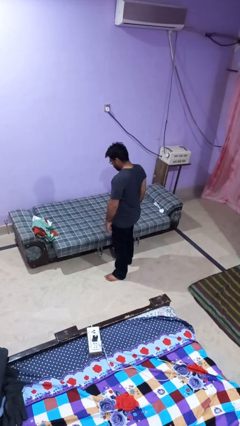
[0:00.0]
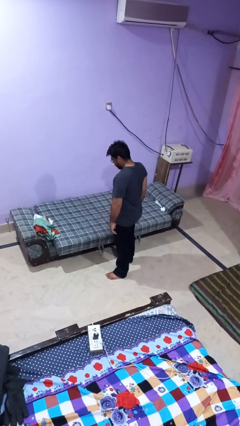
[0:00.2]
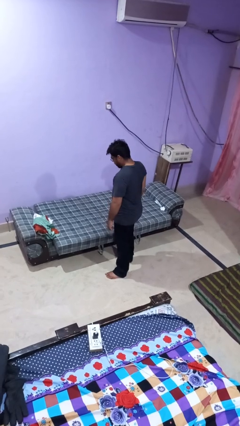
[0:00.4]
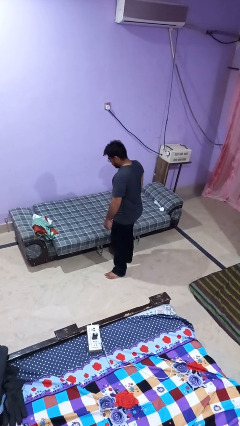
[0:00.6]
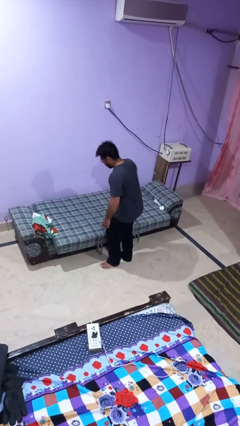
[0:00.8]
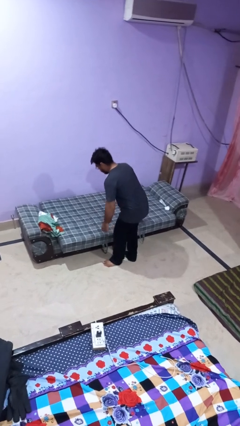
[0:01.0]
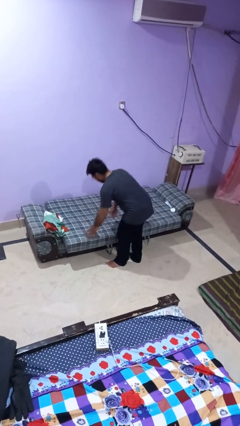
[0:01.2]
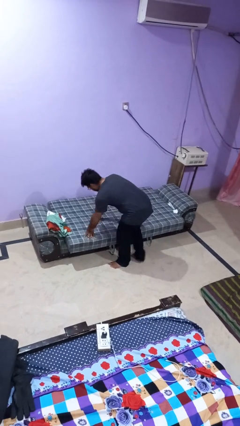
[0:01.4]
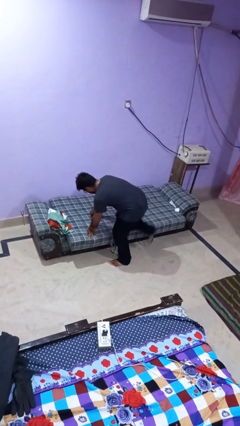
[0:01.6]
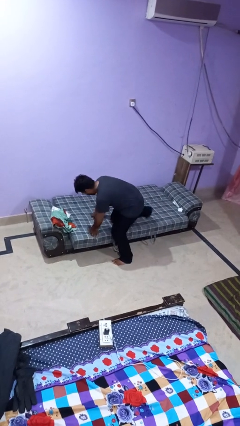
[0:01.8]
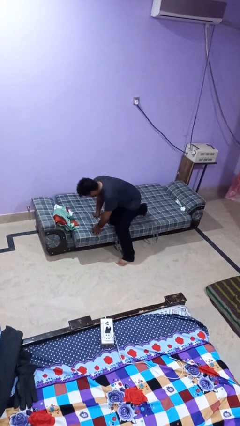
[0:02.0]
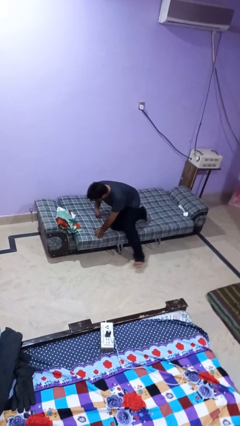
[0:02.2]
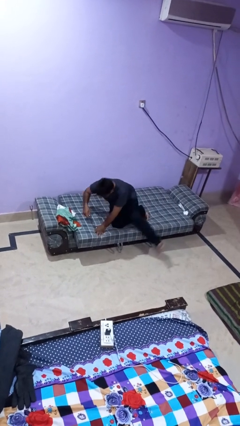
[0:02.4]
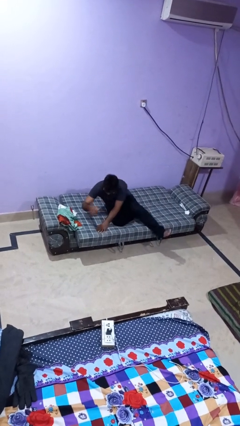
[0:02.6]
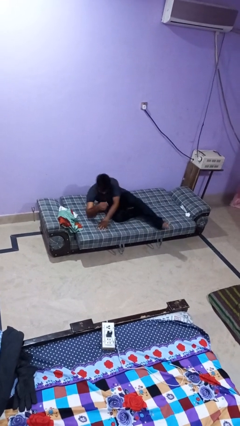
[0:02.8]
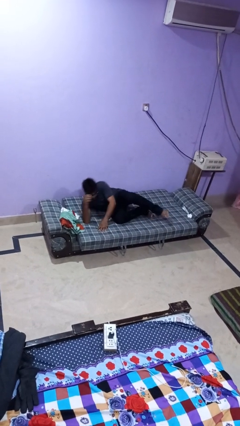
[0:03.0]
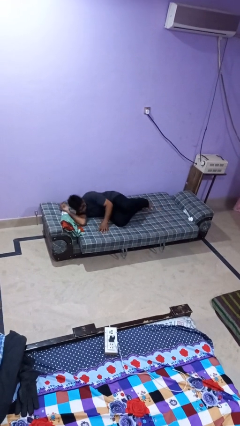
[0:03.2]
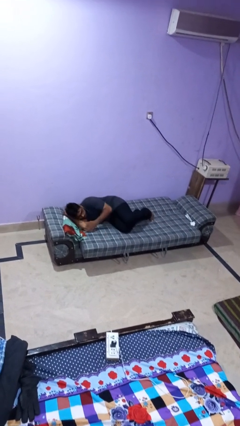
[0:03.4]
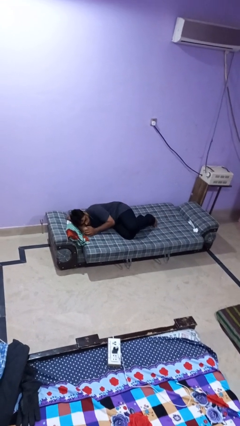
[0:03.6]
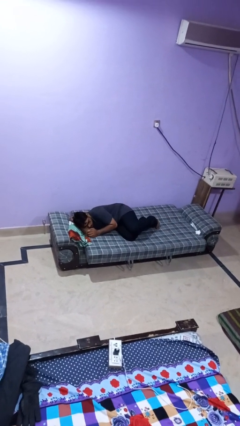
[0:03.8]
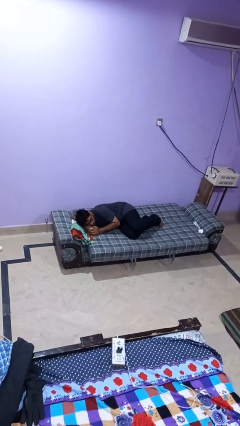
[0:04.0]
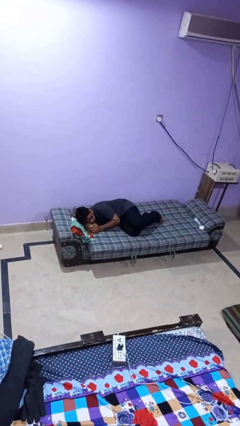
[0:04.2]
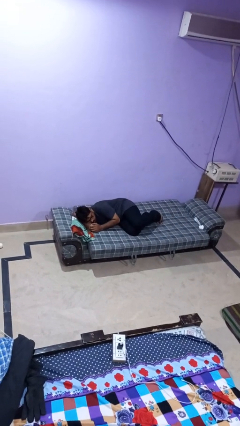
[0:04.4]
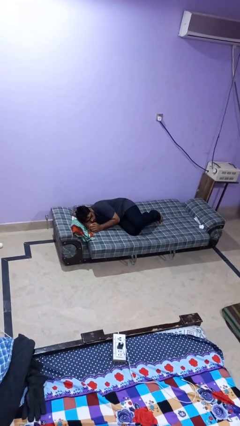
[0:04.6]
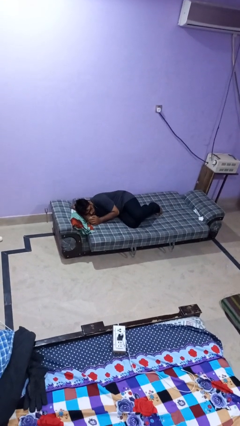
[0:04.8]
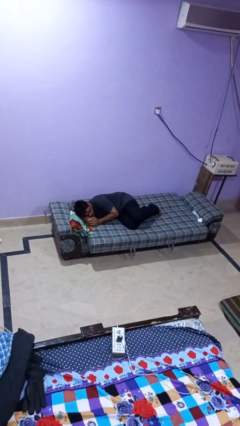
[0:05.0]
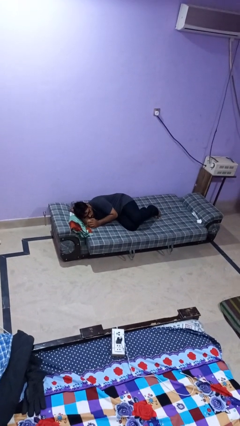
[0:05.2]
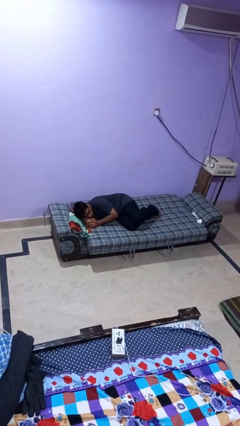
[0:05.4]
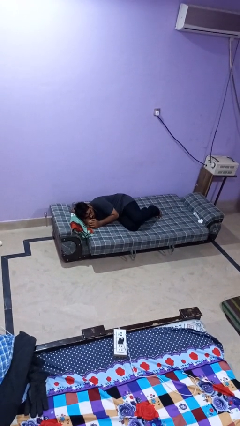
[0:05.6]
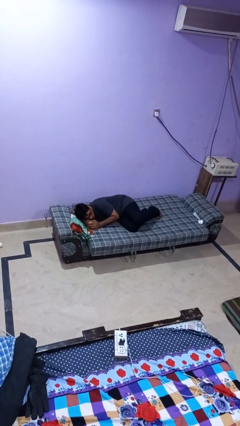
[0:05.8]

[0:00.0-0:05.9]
person lies down on bed

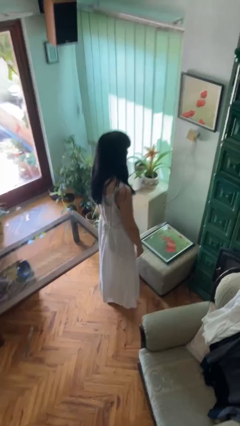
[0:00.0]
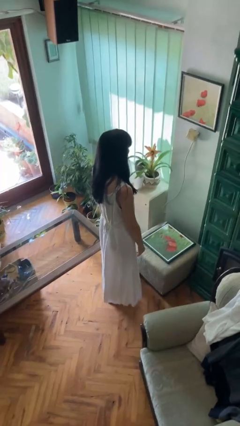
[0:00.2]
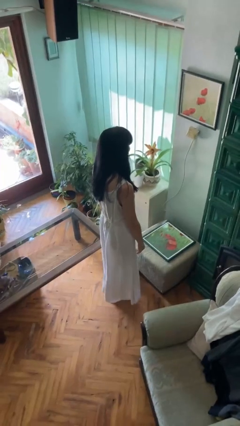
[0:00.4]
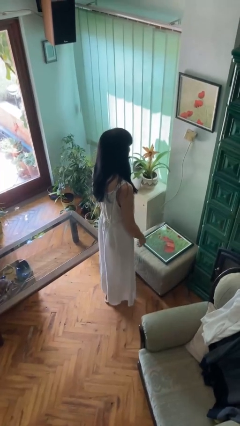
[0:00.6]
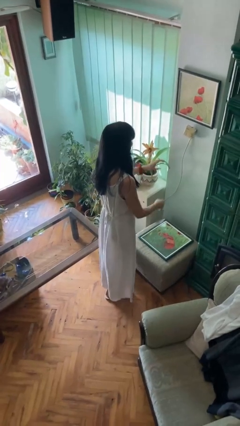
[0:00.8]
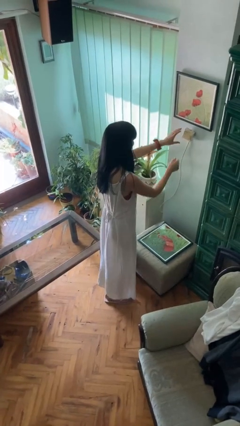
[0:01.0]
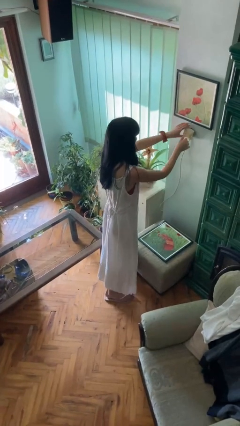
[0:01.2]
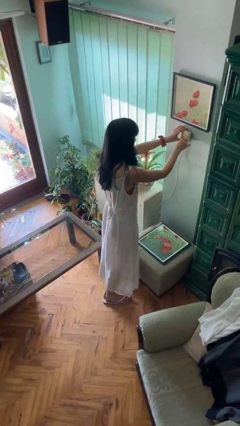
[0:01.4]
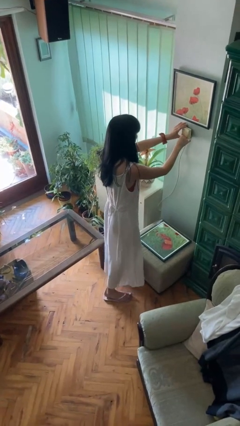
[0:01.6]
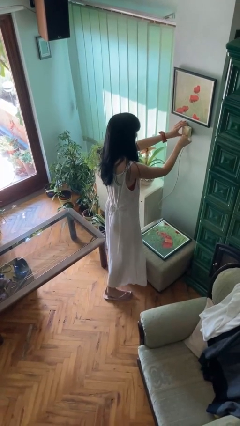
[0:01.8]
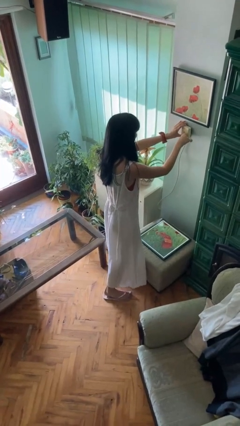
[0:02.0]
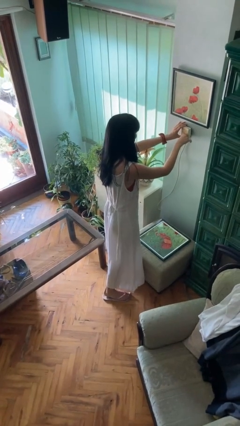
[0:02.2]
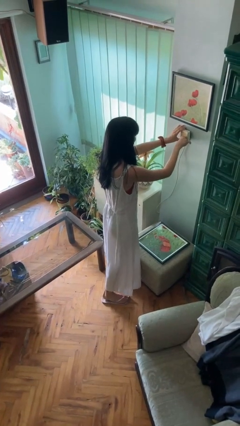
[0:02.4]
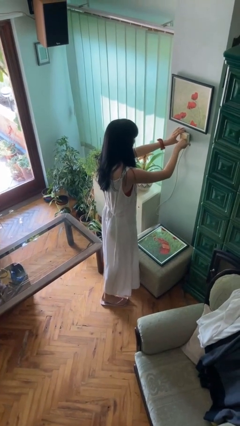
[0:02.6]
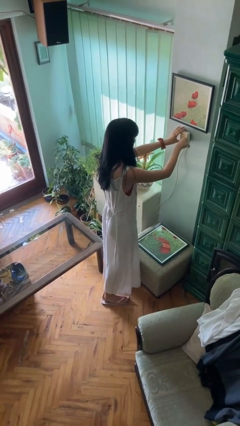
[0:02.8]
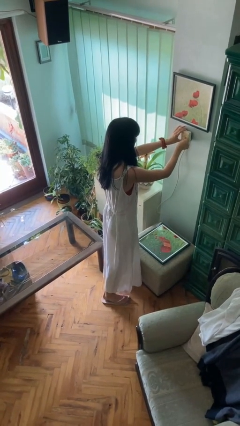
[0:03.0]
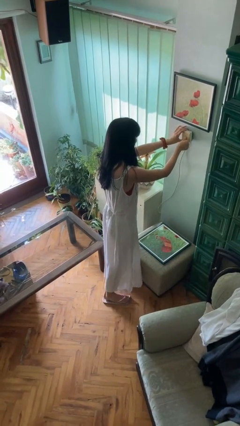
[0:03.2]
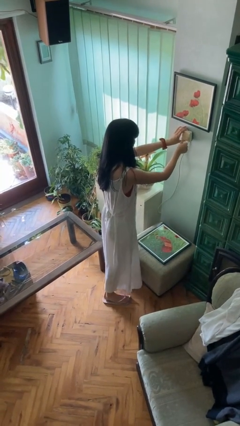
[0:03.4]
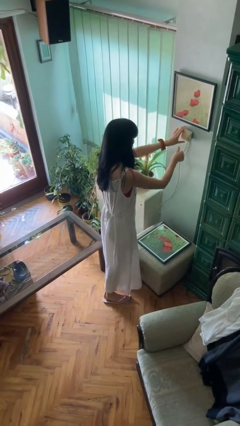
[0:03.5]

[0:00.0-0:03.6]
person adjusts thermostat

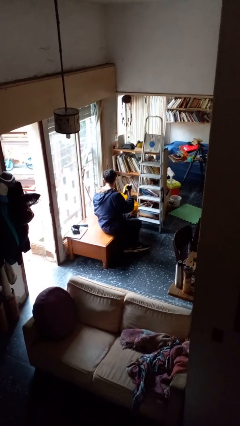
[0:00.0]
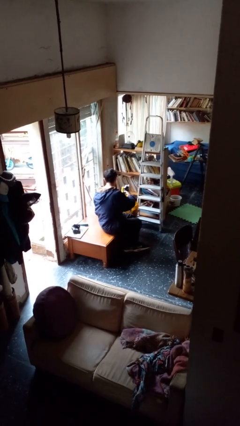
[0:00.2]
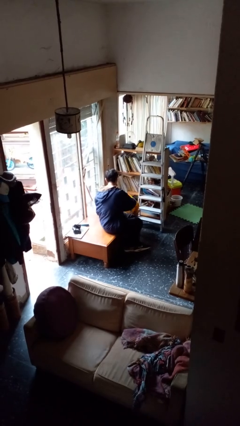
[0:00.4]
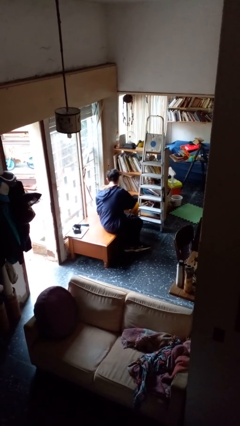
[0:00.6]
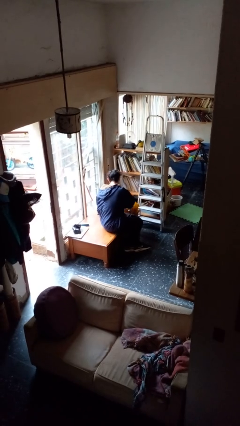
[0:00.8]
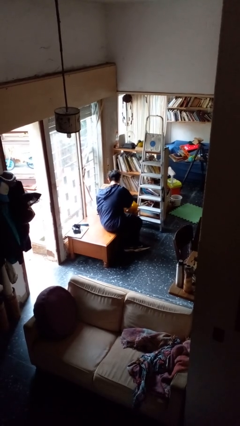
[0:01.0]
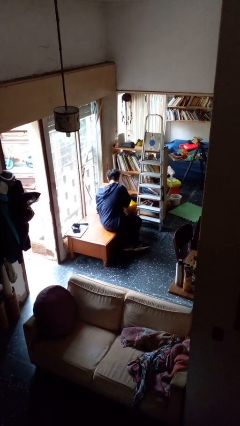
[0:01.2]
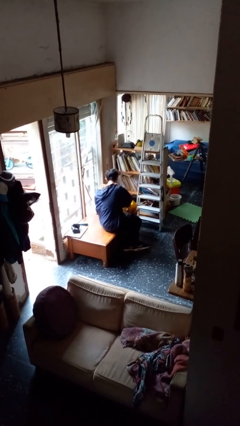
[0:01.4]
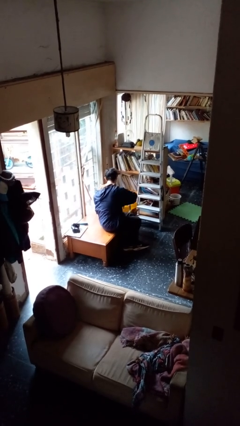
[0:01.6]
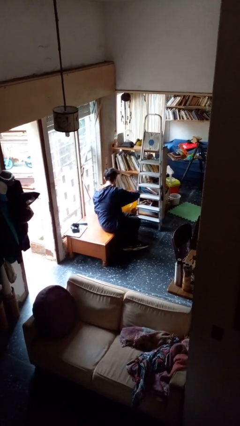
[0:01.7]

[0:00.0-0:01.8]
person puts object into bag

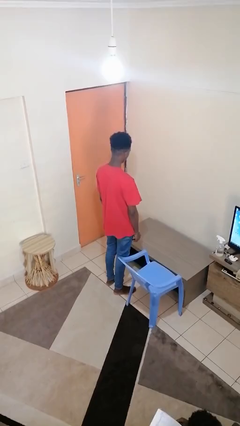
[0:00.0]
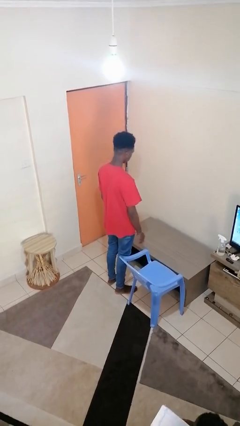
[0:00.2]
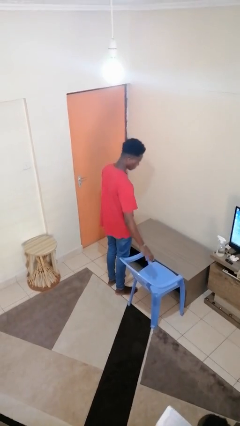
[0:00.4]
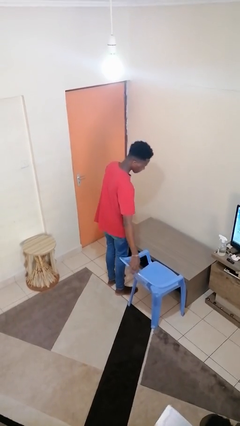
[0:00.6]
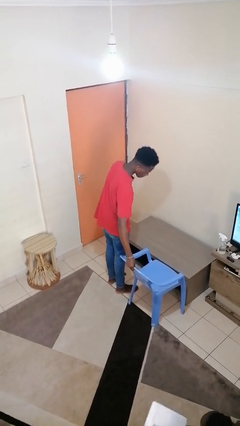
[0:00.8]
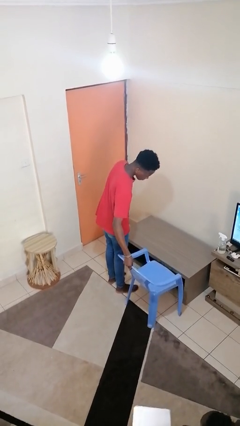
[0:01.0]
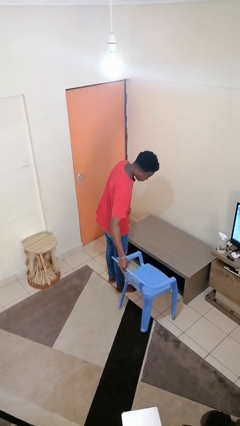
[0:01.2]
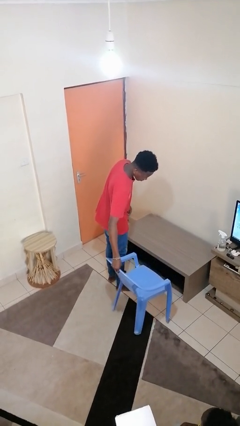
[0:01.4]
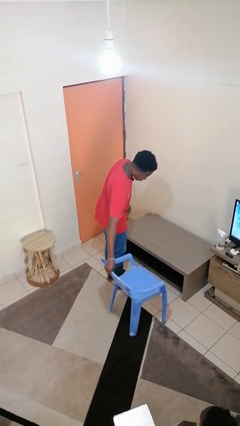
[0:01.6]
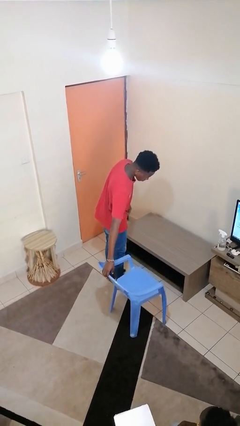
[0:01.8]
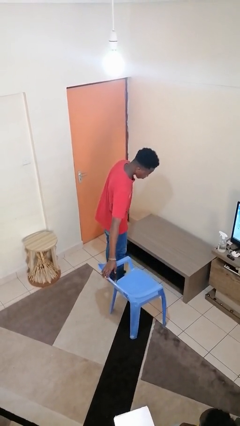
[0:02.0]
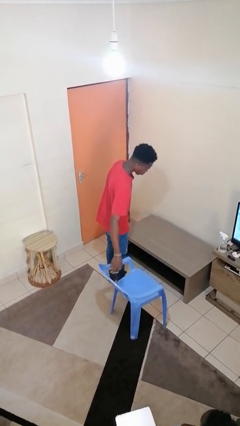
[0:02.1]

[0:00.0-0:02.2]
person pulls out chair

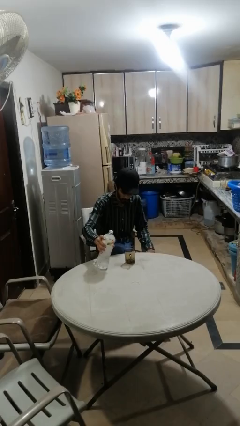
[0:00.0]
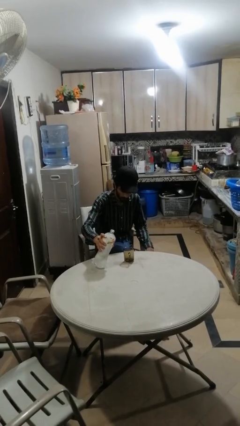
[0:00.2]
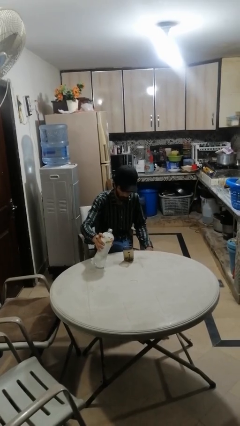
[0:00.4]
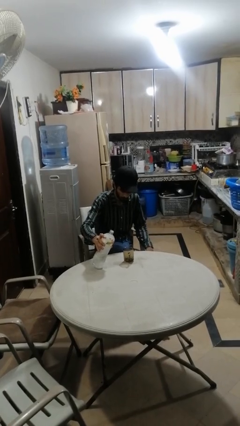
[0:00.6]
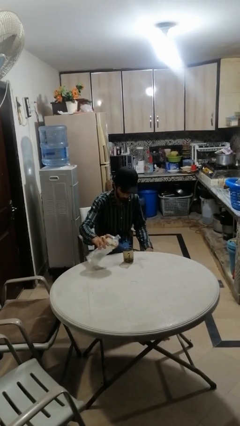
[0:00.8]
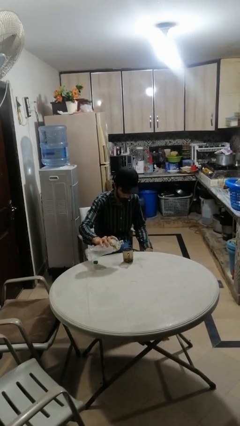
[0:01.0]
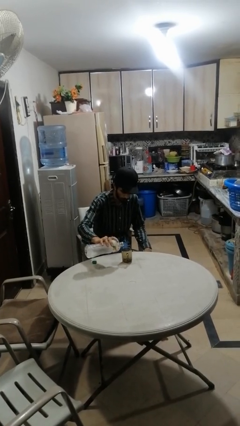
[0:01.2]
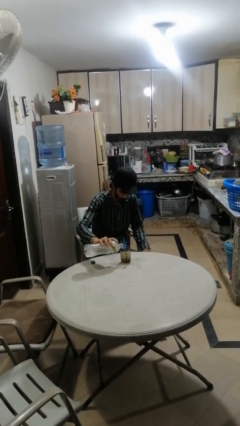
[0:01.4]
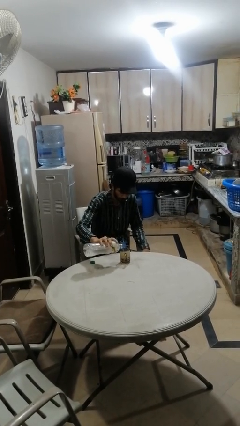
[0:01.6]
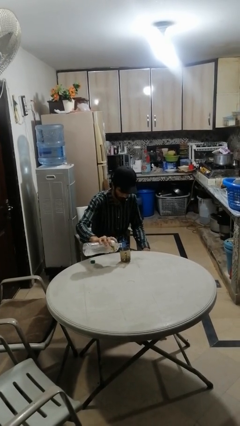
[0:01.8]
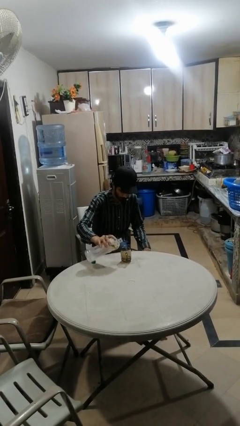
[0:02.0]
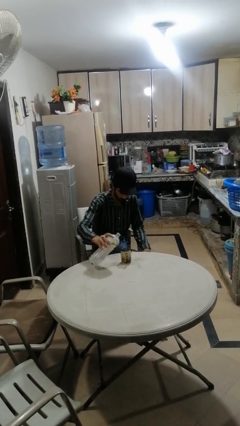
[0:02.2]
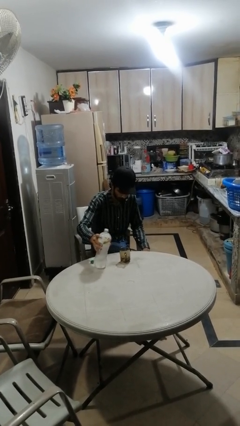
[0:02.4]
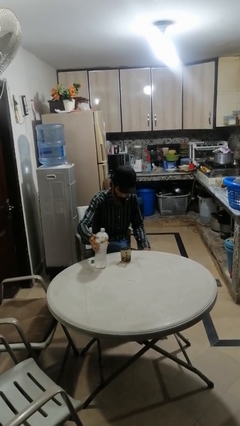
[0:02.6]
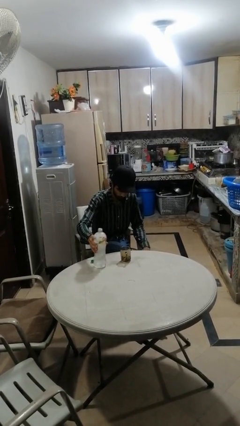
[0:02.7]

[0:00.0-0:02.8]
person pours liquid into cup

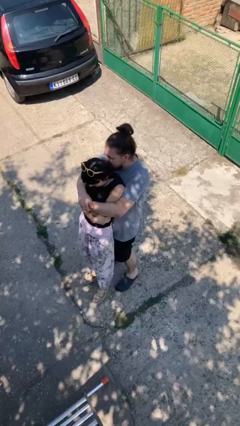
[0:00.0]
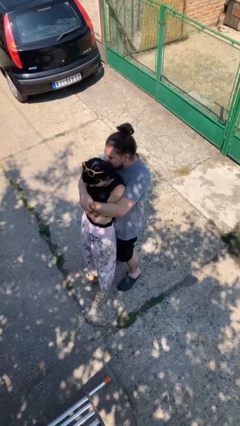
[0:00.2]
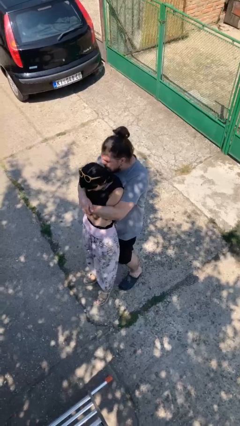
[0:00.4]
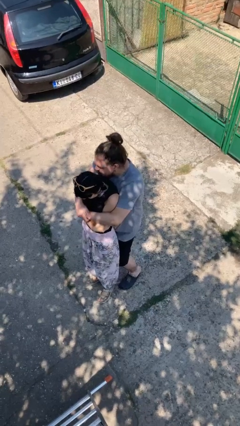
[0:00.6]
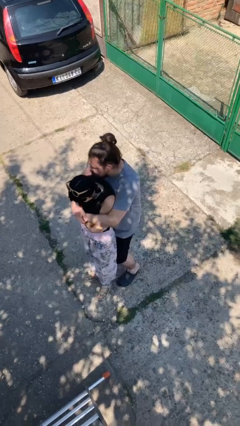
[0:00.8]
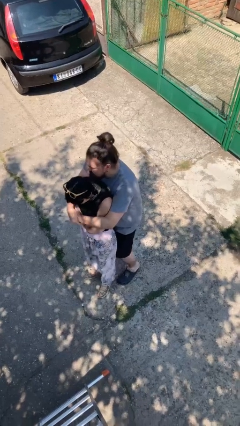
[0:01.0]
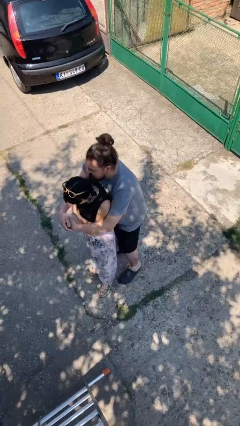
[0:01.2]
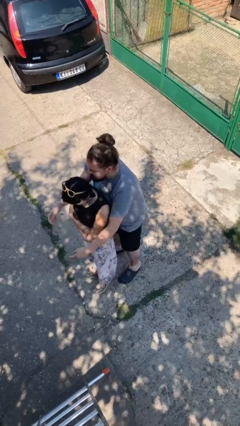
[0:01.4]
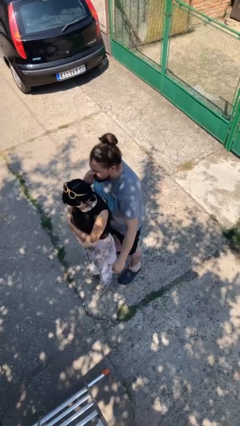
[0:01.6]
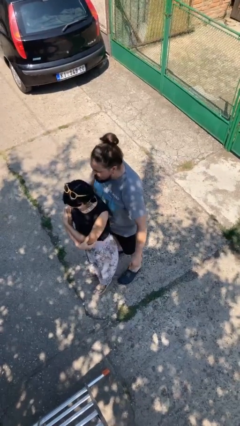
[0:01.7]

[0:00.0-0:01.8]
person puts down person
